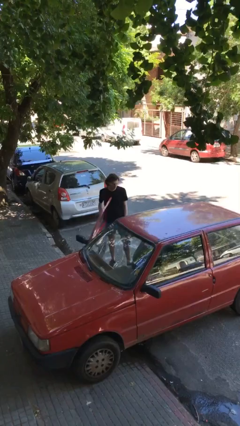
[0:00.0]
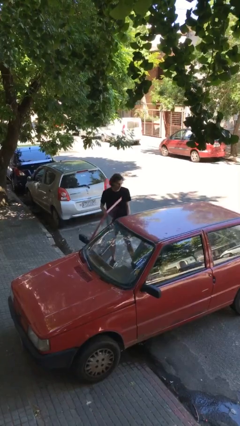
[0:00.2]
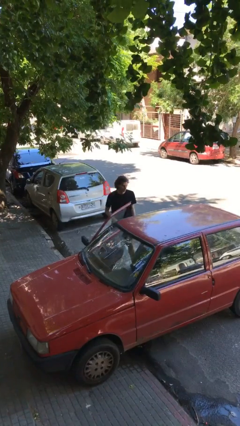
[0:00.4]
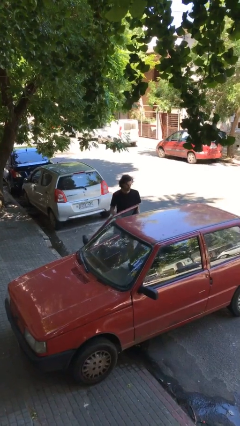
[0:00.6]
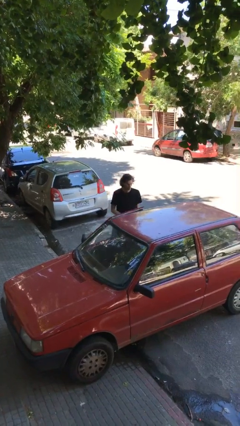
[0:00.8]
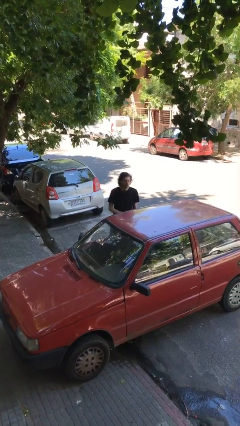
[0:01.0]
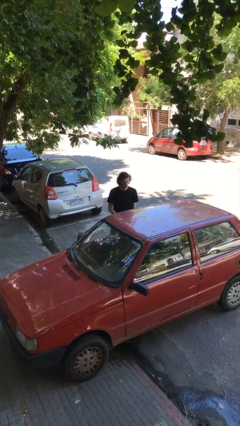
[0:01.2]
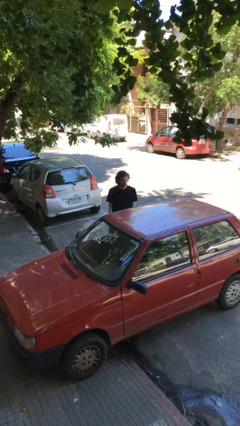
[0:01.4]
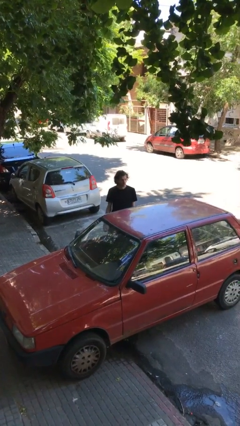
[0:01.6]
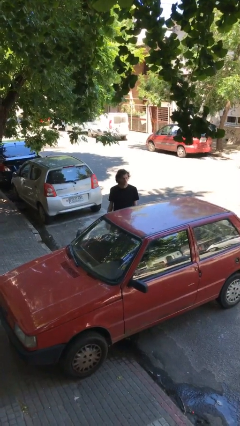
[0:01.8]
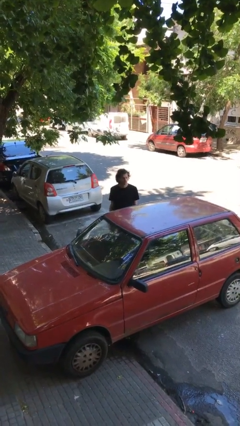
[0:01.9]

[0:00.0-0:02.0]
person closes car door

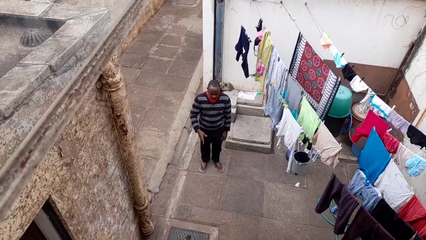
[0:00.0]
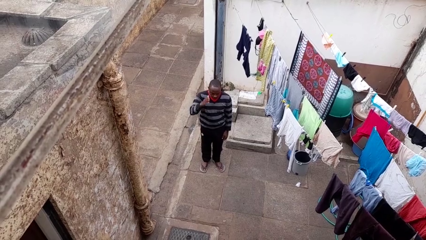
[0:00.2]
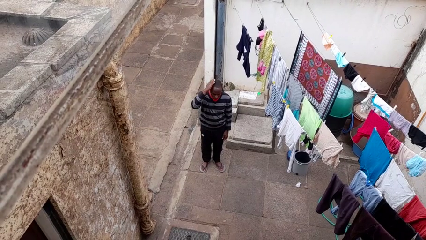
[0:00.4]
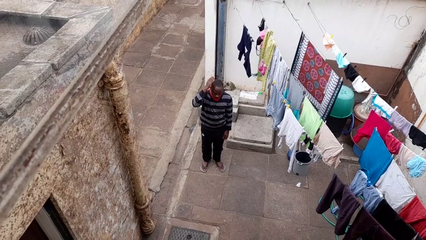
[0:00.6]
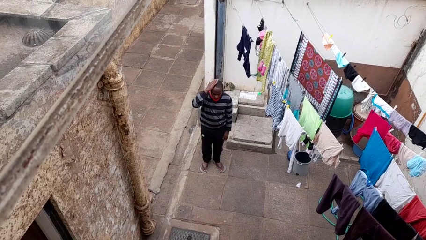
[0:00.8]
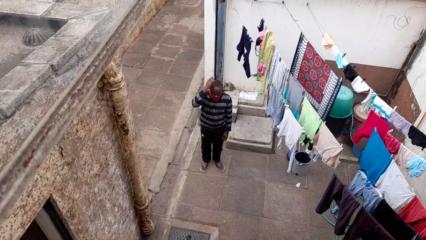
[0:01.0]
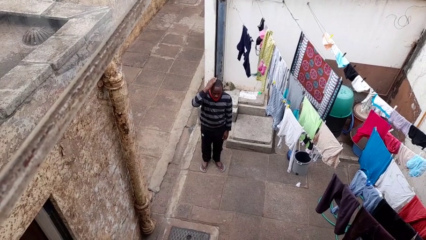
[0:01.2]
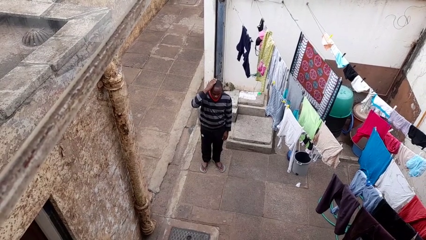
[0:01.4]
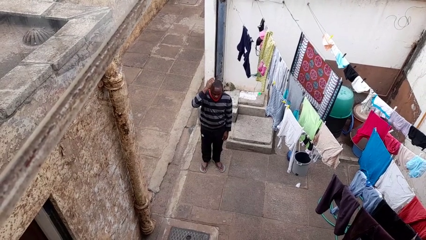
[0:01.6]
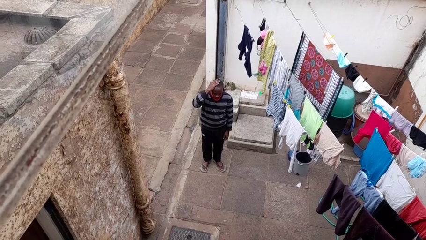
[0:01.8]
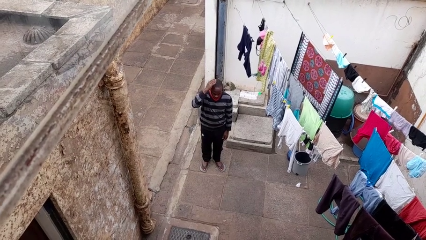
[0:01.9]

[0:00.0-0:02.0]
person pats head

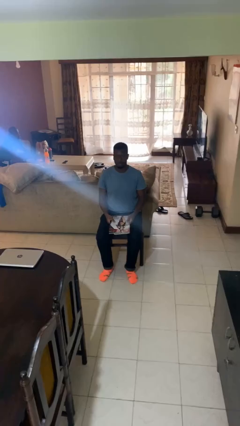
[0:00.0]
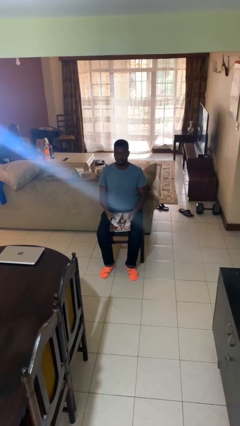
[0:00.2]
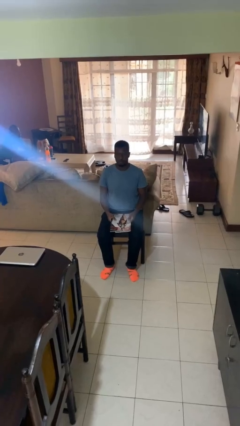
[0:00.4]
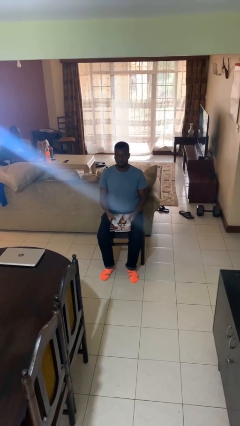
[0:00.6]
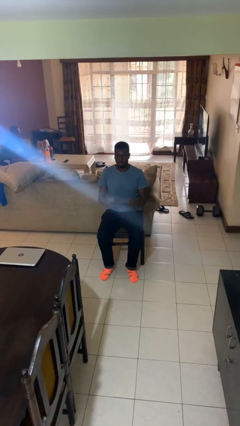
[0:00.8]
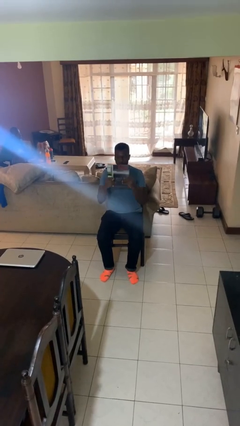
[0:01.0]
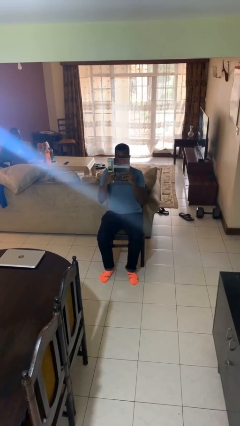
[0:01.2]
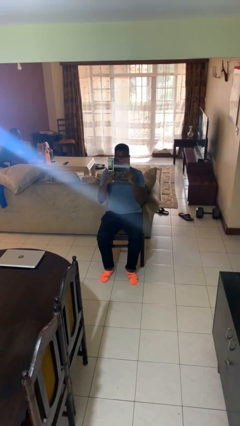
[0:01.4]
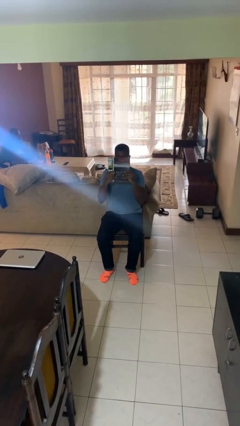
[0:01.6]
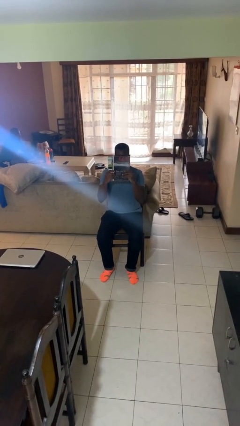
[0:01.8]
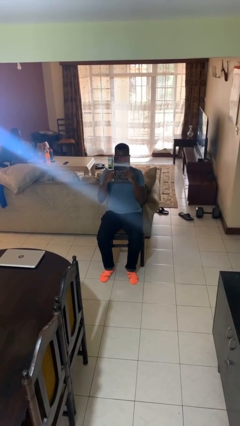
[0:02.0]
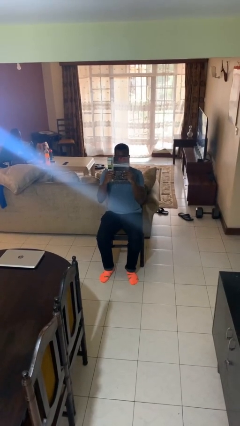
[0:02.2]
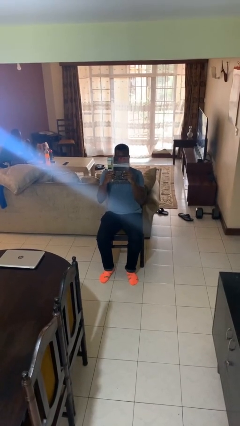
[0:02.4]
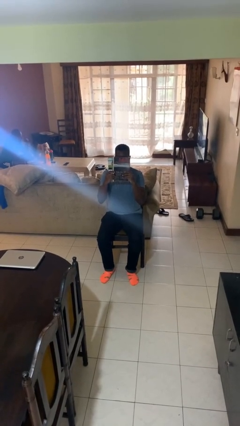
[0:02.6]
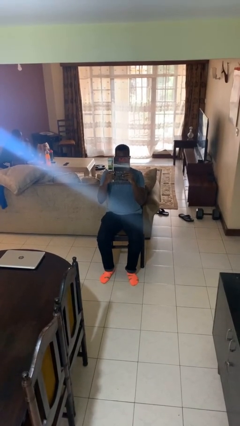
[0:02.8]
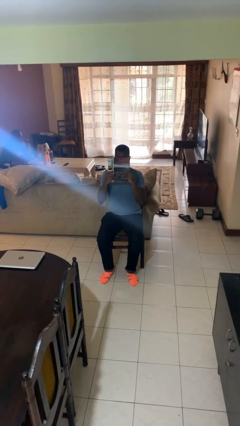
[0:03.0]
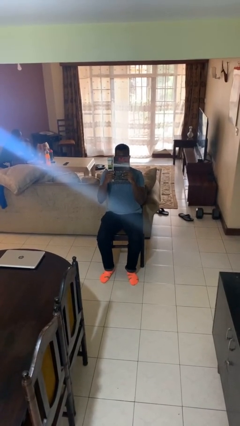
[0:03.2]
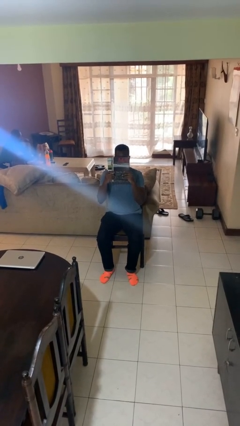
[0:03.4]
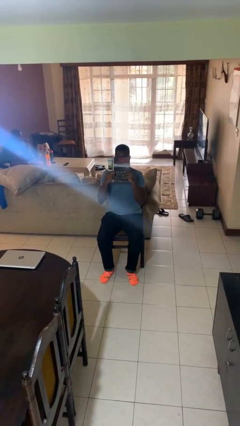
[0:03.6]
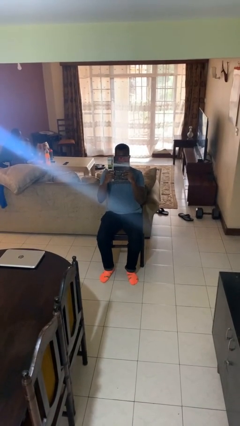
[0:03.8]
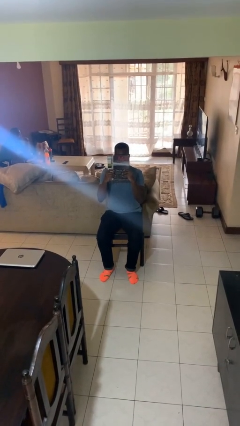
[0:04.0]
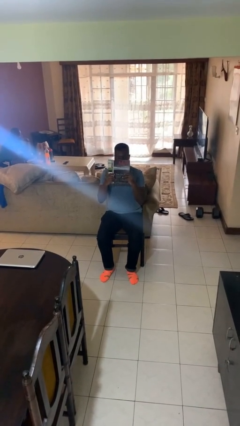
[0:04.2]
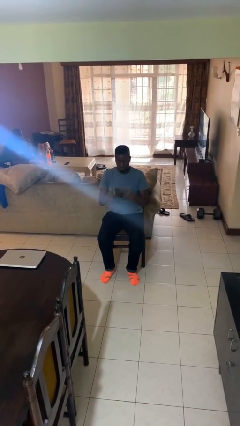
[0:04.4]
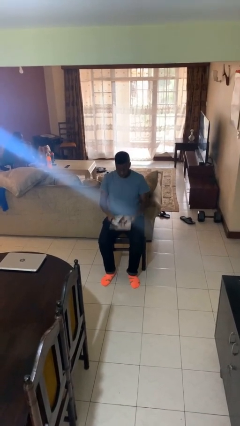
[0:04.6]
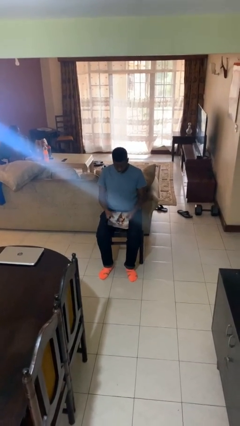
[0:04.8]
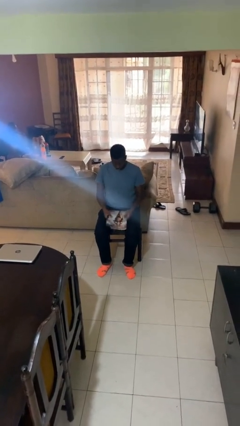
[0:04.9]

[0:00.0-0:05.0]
person reads document

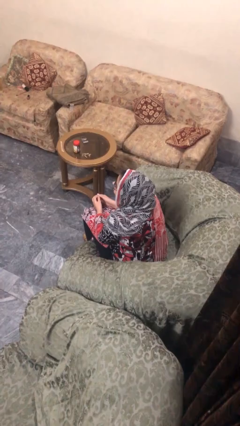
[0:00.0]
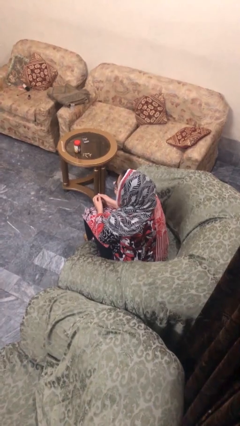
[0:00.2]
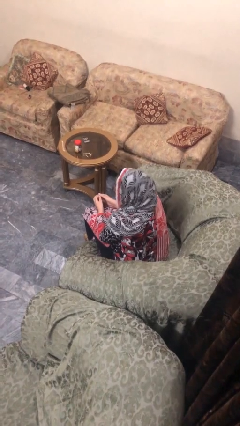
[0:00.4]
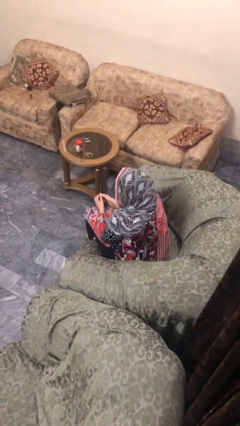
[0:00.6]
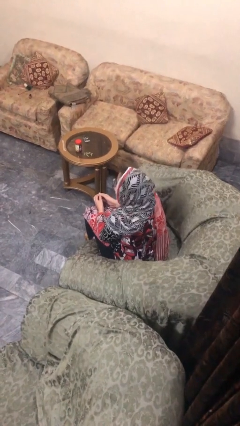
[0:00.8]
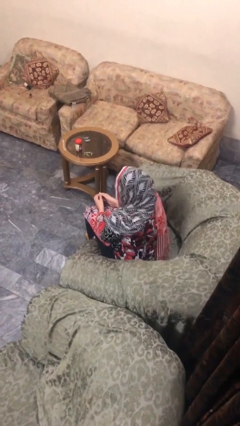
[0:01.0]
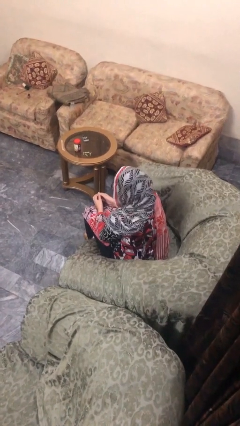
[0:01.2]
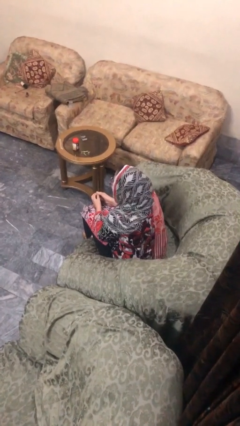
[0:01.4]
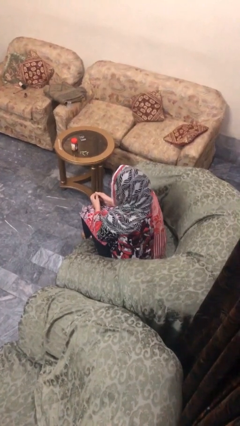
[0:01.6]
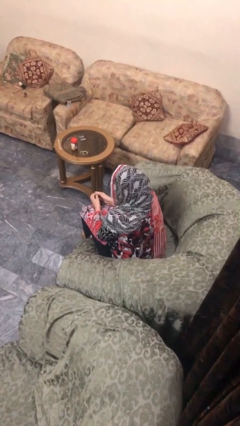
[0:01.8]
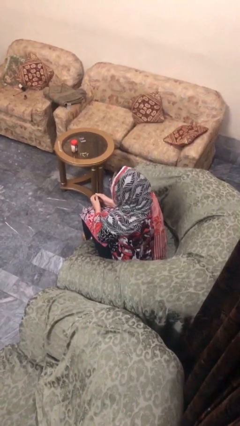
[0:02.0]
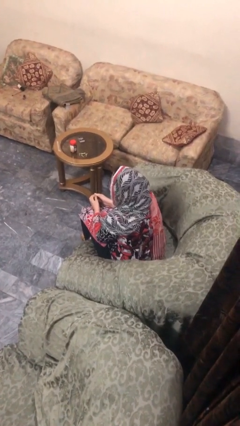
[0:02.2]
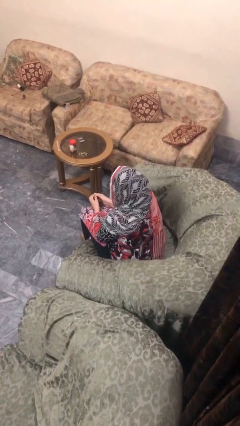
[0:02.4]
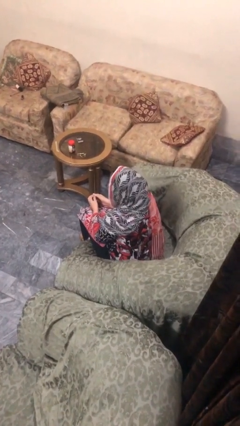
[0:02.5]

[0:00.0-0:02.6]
person nods head

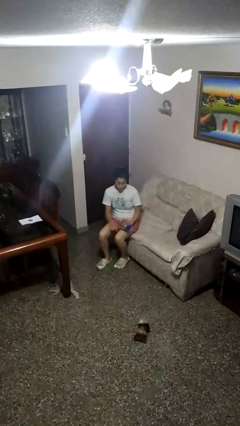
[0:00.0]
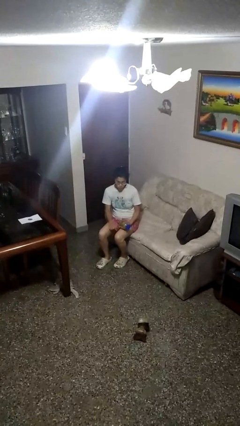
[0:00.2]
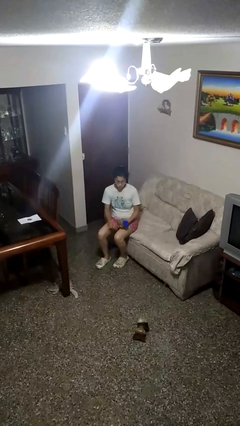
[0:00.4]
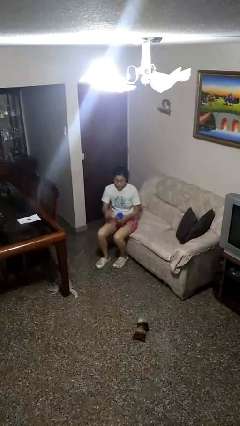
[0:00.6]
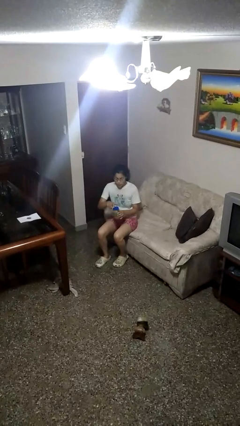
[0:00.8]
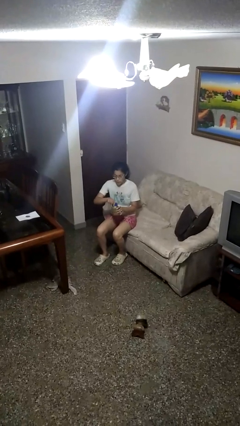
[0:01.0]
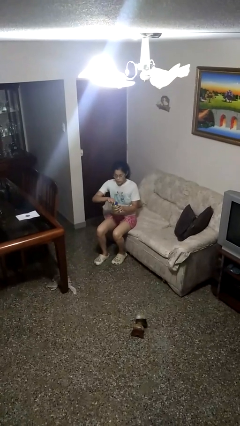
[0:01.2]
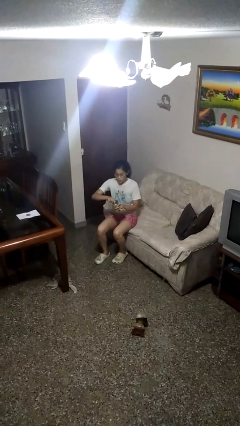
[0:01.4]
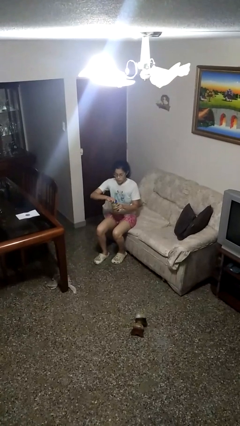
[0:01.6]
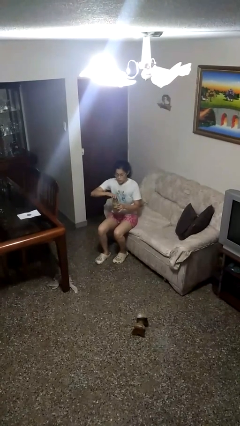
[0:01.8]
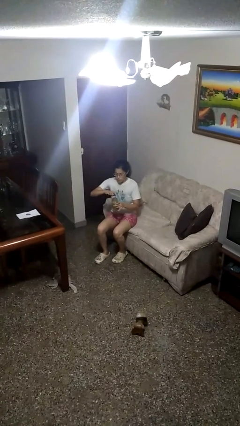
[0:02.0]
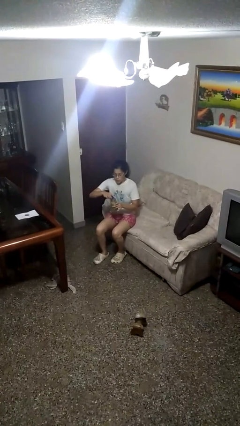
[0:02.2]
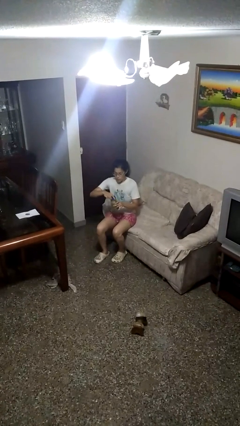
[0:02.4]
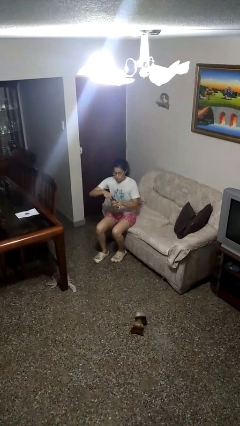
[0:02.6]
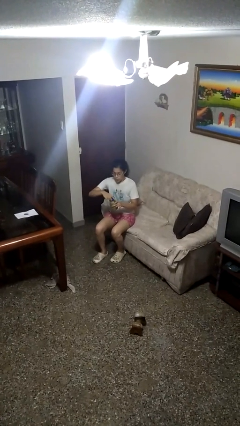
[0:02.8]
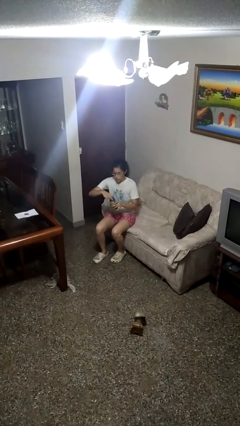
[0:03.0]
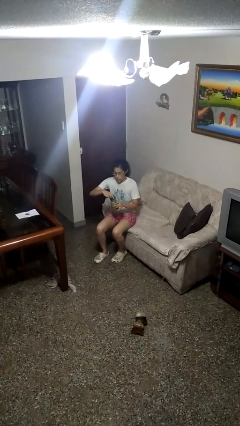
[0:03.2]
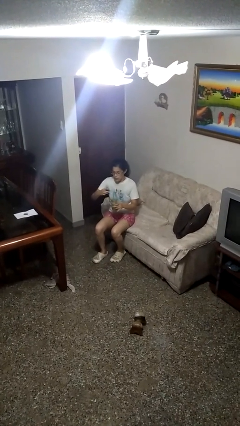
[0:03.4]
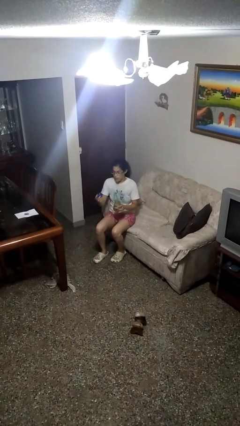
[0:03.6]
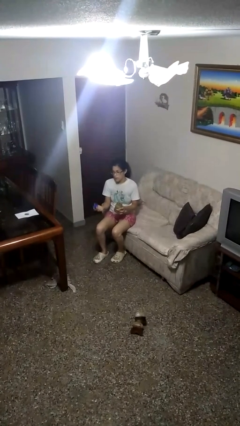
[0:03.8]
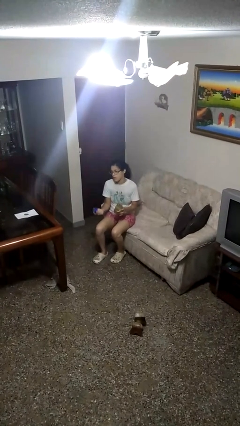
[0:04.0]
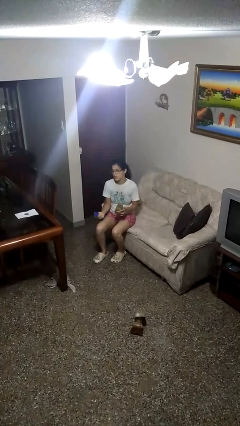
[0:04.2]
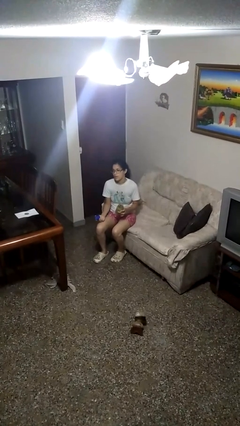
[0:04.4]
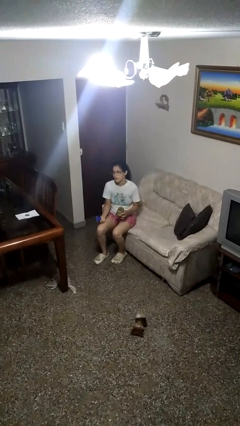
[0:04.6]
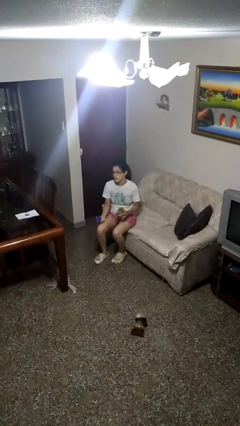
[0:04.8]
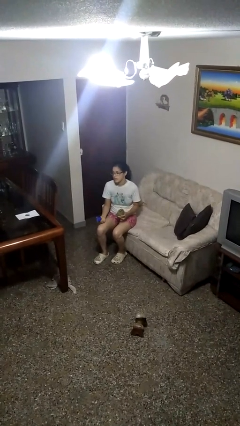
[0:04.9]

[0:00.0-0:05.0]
person opens jar

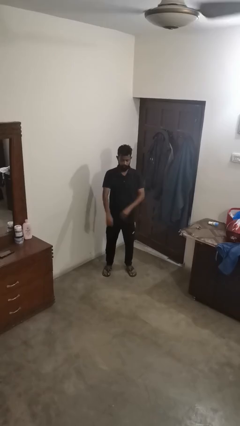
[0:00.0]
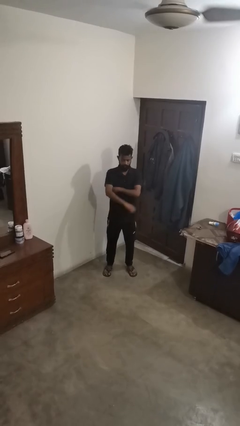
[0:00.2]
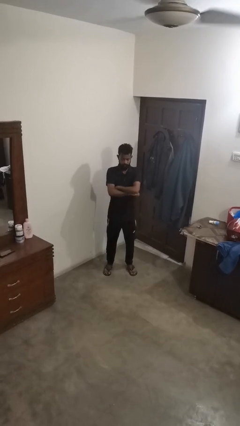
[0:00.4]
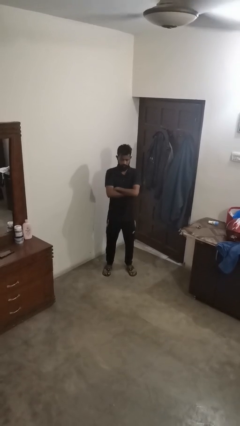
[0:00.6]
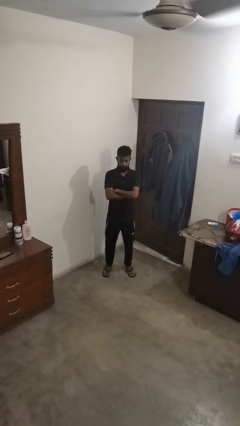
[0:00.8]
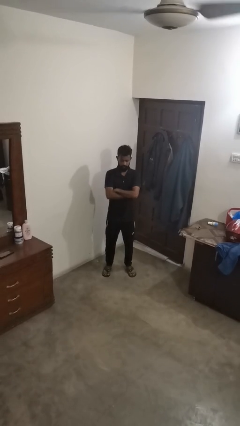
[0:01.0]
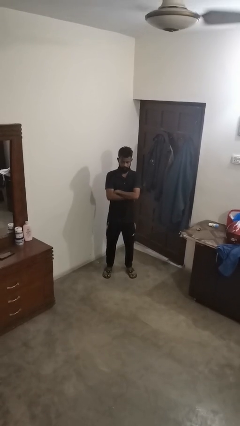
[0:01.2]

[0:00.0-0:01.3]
person crosses arms
